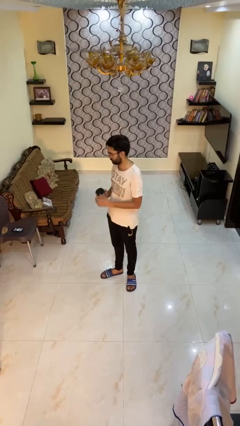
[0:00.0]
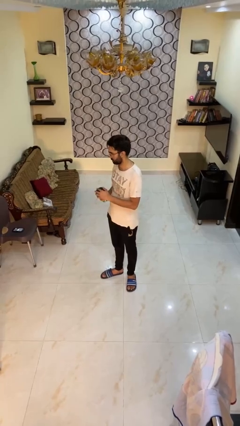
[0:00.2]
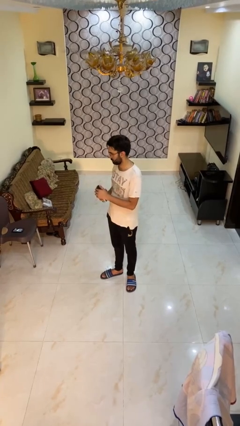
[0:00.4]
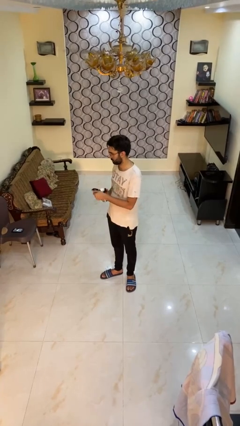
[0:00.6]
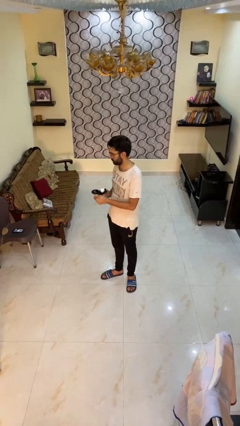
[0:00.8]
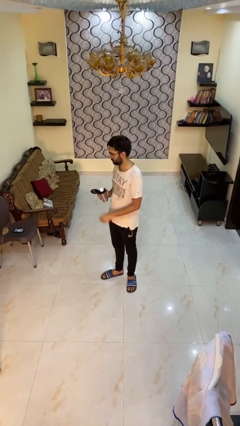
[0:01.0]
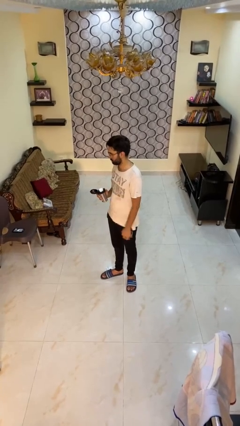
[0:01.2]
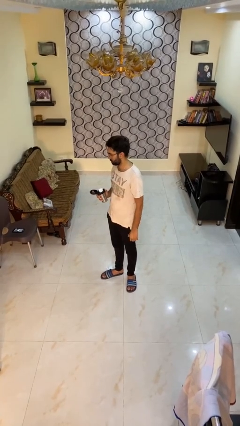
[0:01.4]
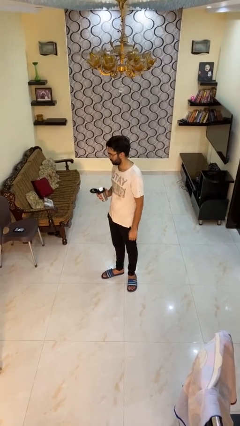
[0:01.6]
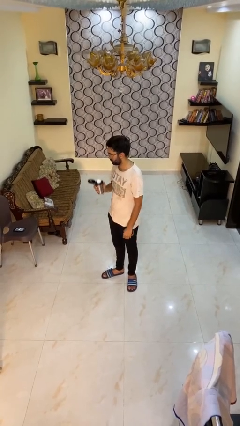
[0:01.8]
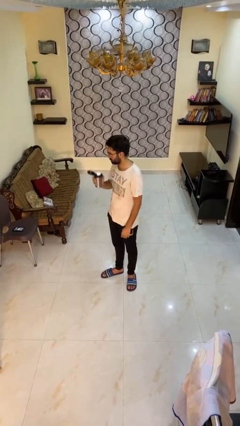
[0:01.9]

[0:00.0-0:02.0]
person opens beverage can

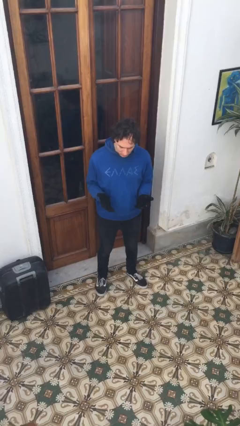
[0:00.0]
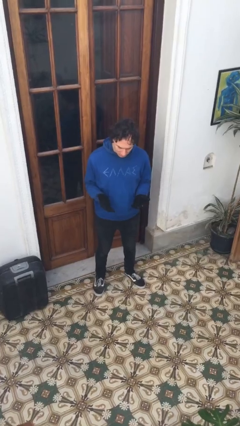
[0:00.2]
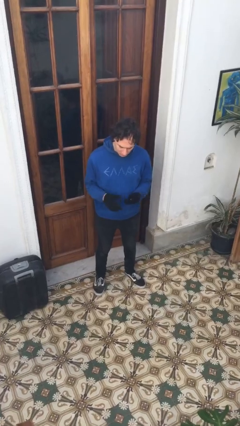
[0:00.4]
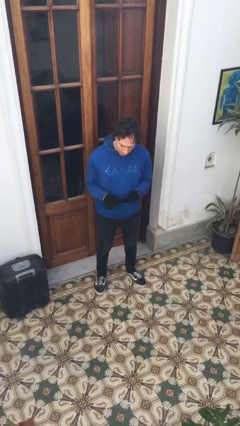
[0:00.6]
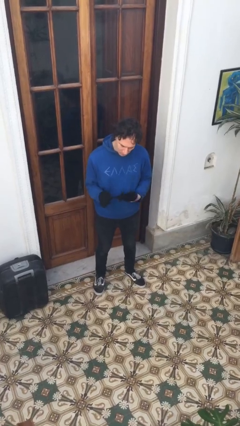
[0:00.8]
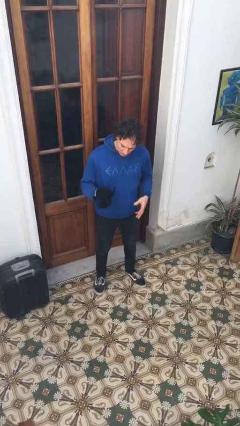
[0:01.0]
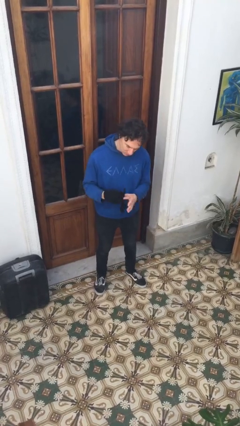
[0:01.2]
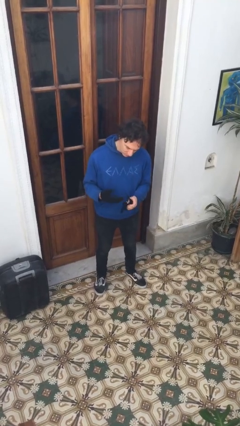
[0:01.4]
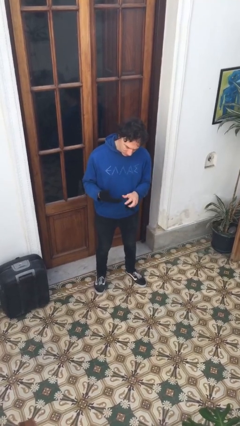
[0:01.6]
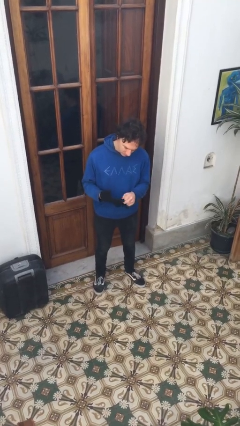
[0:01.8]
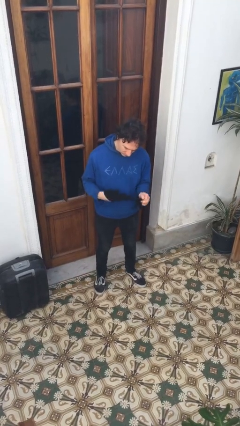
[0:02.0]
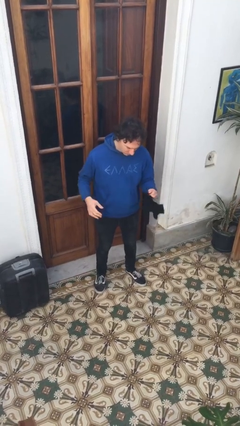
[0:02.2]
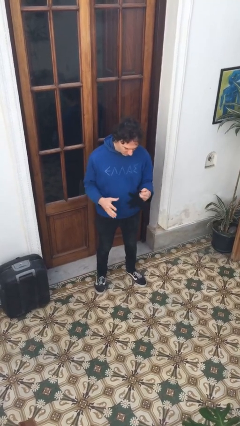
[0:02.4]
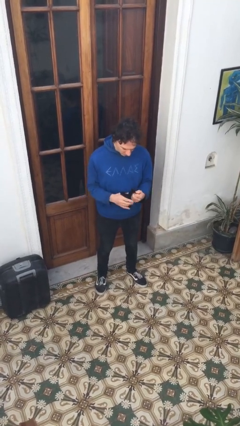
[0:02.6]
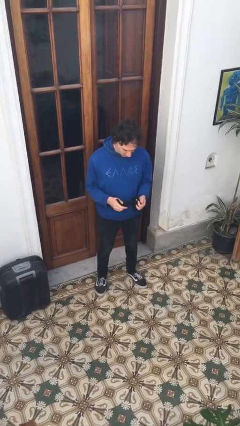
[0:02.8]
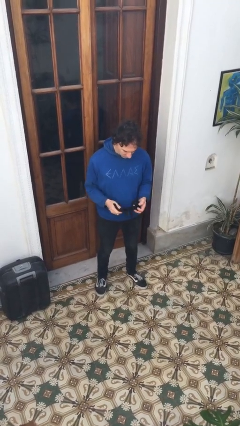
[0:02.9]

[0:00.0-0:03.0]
person takes off gloves

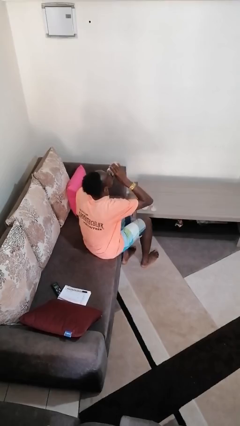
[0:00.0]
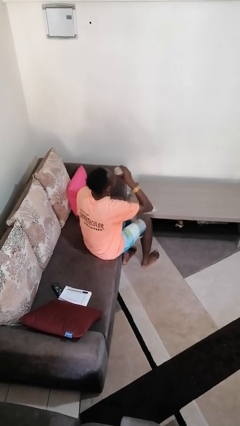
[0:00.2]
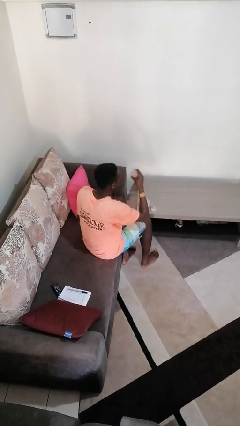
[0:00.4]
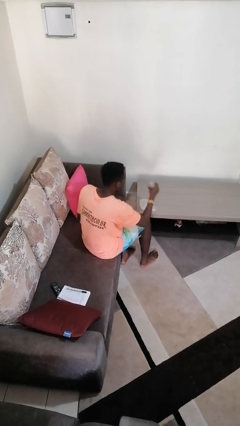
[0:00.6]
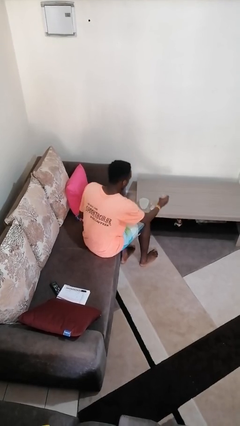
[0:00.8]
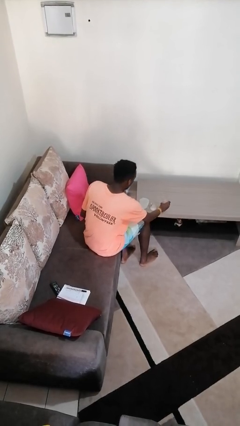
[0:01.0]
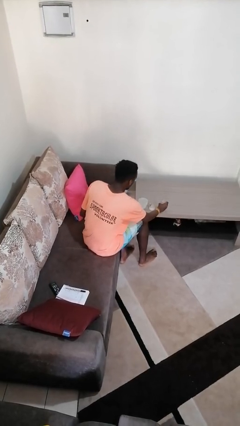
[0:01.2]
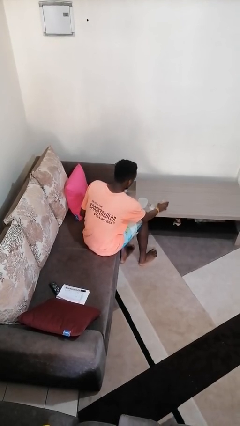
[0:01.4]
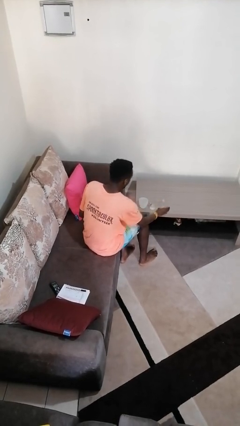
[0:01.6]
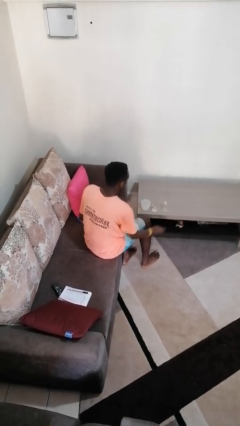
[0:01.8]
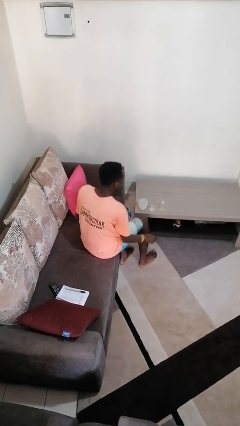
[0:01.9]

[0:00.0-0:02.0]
person puts down object on table

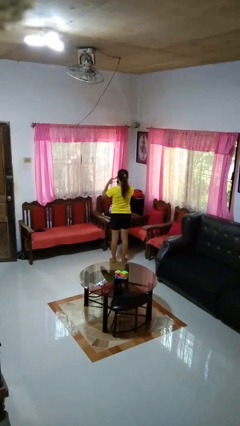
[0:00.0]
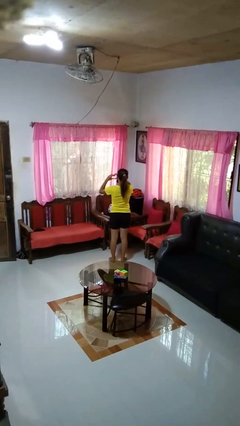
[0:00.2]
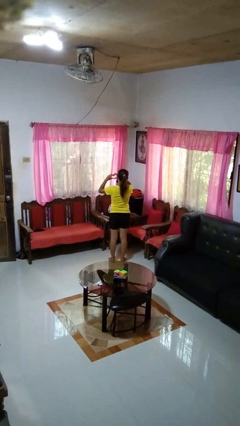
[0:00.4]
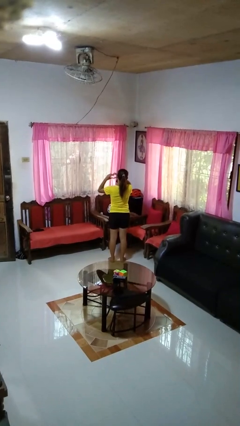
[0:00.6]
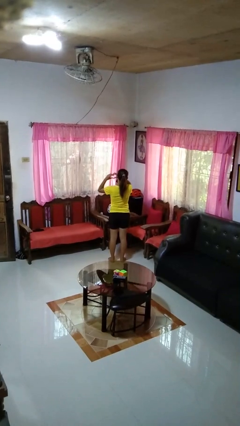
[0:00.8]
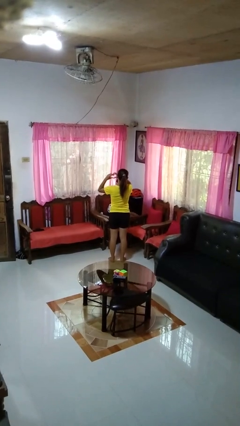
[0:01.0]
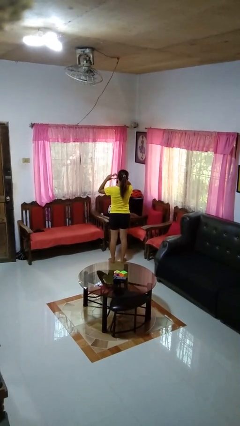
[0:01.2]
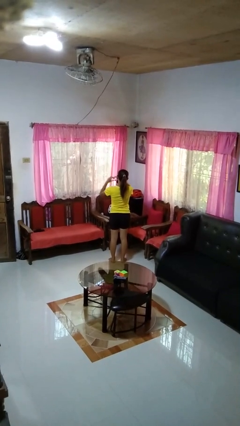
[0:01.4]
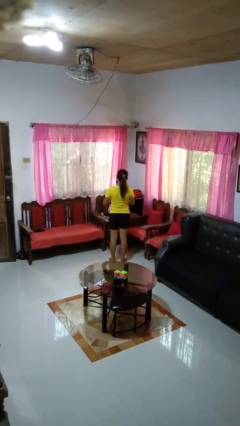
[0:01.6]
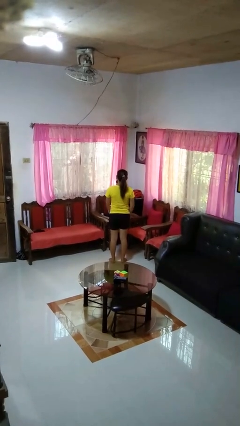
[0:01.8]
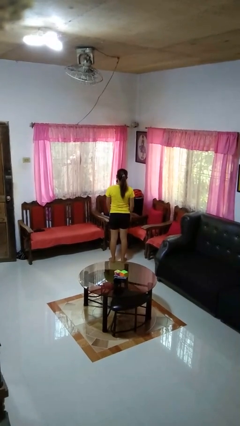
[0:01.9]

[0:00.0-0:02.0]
person gestures heart

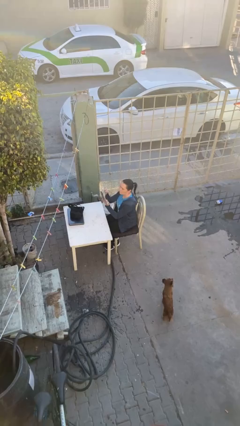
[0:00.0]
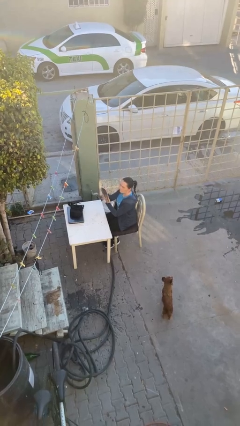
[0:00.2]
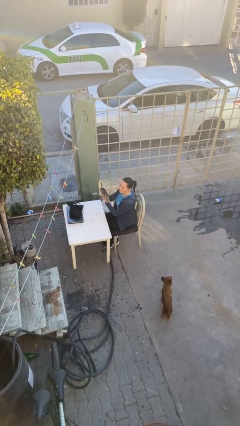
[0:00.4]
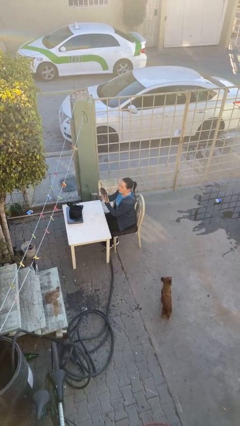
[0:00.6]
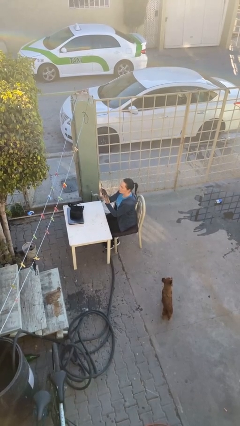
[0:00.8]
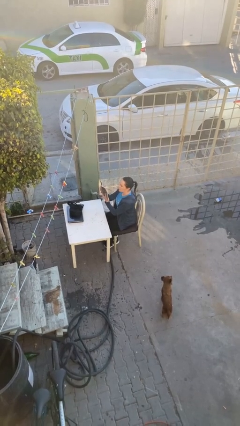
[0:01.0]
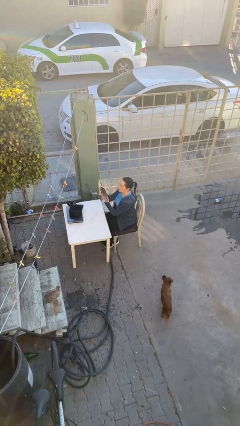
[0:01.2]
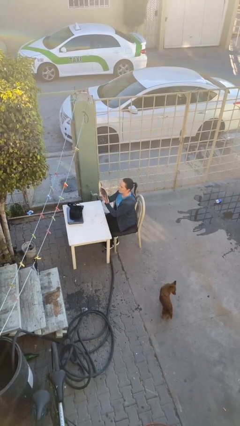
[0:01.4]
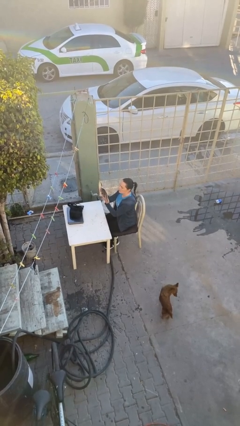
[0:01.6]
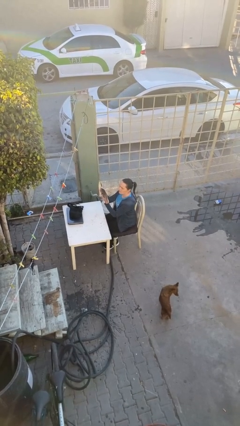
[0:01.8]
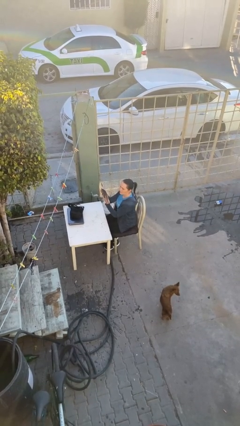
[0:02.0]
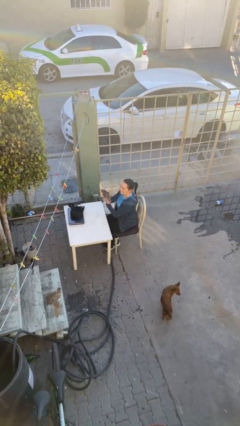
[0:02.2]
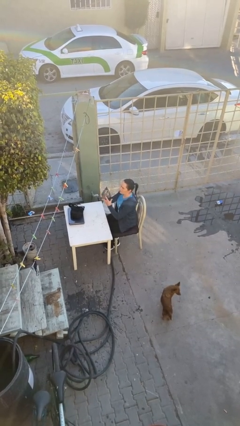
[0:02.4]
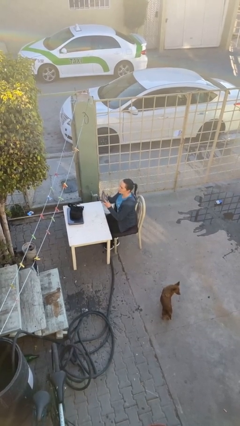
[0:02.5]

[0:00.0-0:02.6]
person reads document

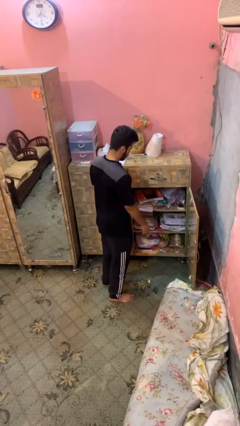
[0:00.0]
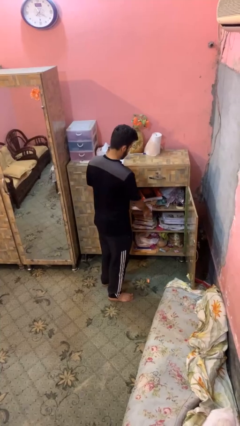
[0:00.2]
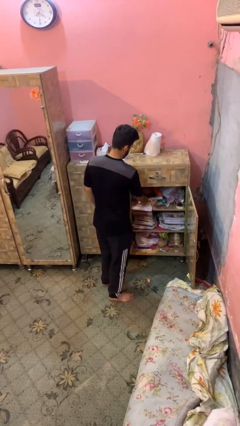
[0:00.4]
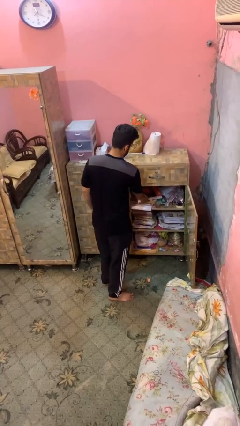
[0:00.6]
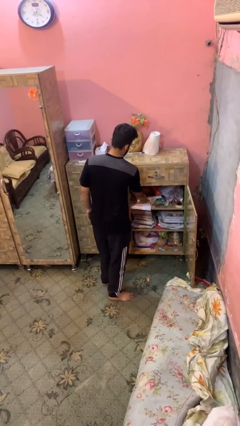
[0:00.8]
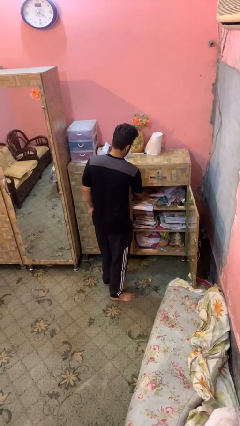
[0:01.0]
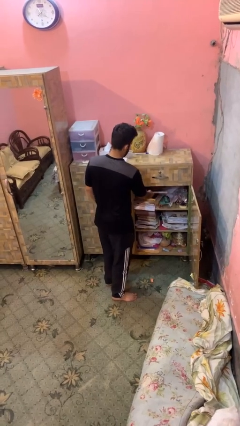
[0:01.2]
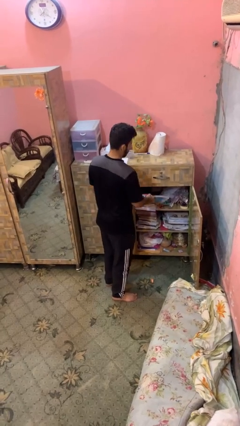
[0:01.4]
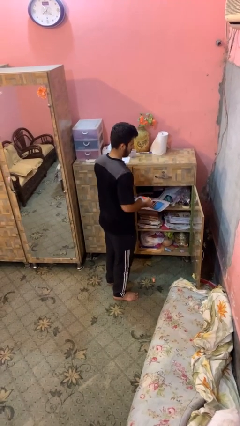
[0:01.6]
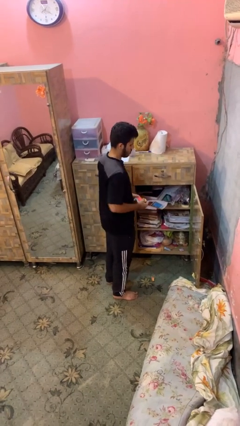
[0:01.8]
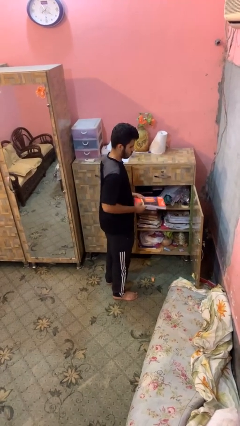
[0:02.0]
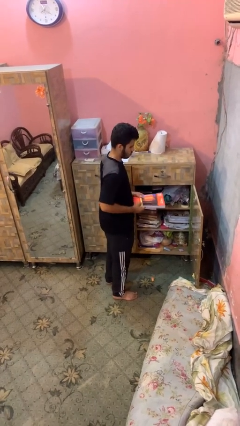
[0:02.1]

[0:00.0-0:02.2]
person picks up object from cabinet

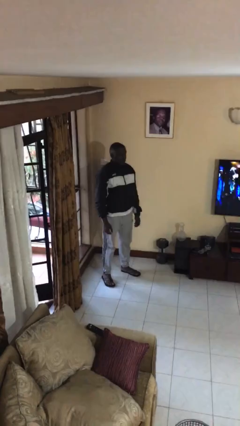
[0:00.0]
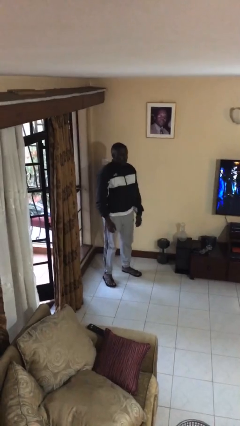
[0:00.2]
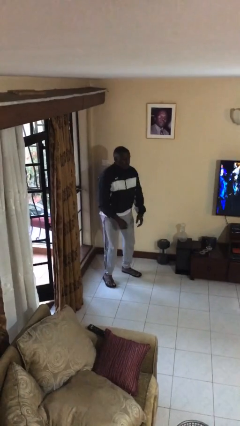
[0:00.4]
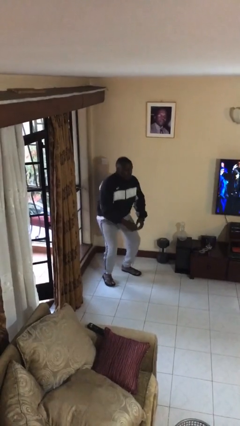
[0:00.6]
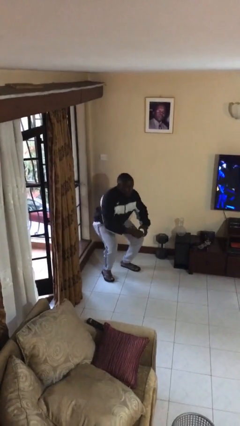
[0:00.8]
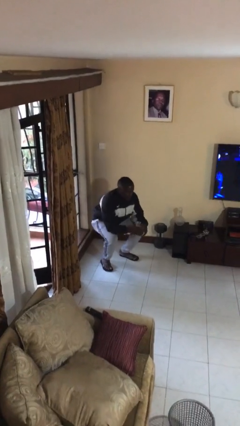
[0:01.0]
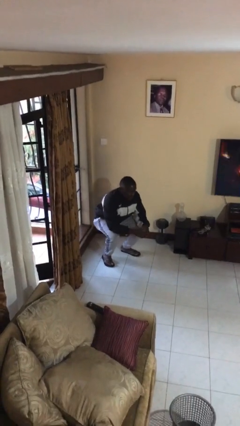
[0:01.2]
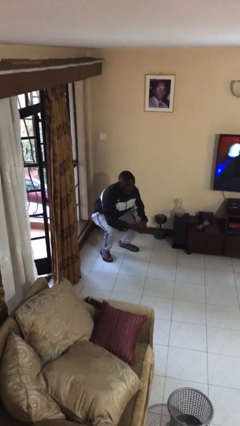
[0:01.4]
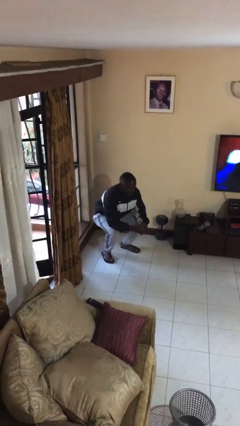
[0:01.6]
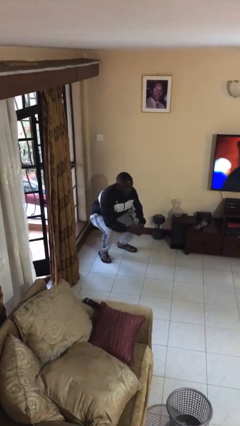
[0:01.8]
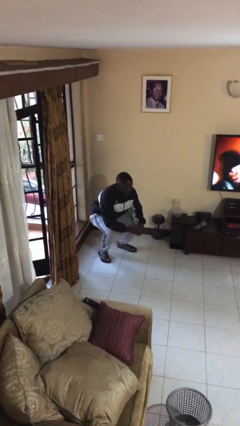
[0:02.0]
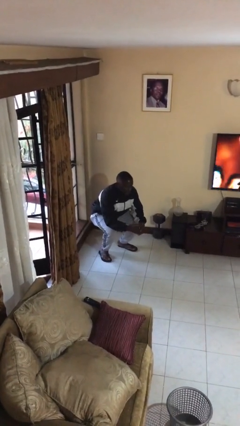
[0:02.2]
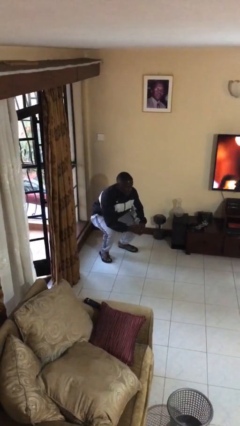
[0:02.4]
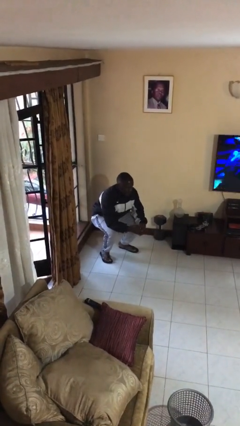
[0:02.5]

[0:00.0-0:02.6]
person squats

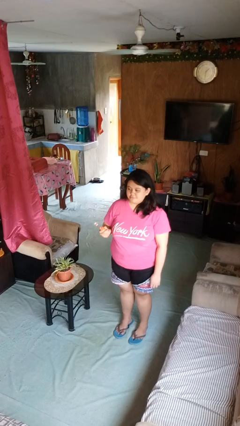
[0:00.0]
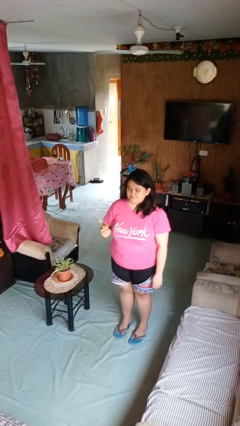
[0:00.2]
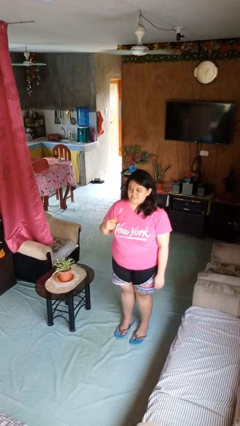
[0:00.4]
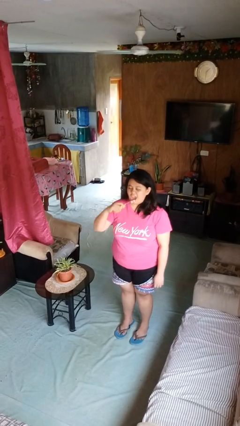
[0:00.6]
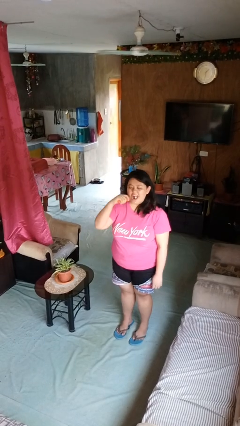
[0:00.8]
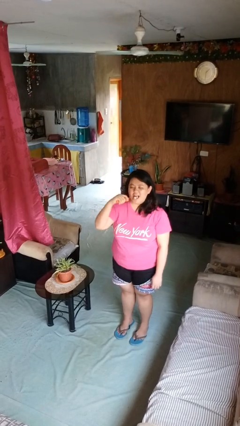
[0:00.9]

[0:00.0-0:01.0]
person brushes teeth
